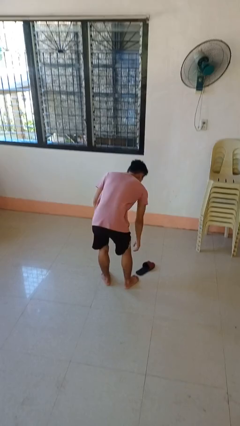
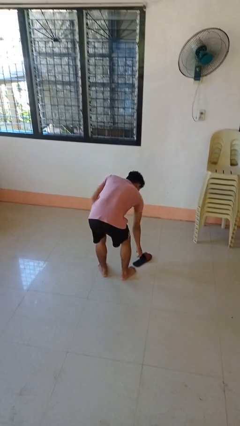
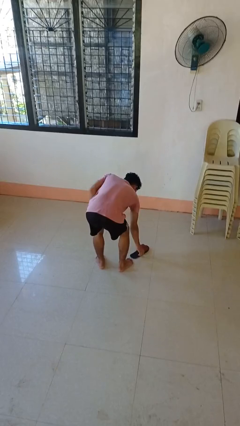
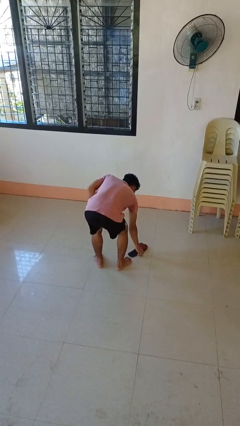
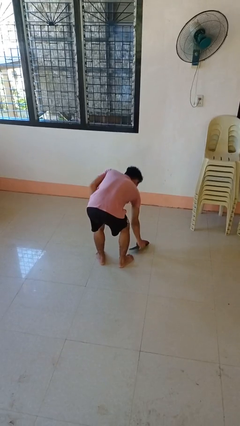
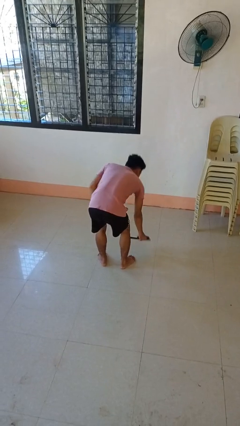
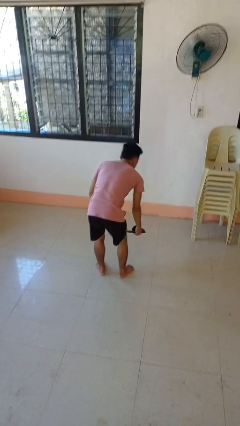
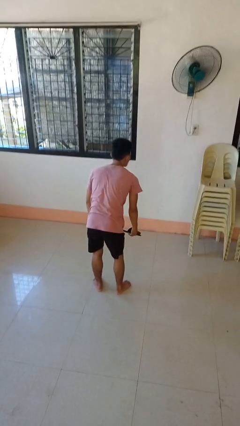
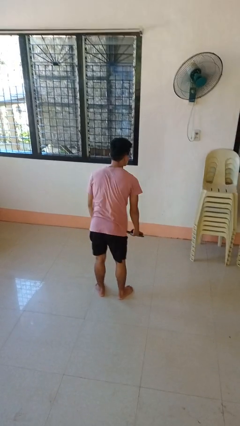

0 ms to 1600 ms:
person picks up object from floor

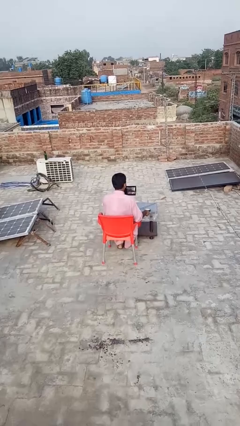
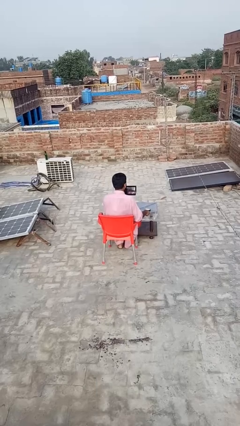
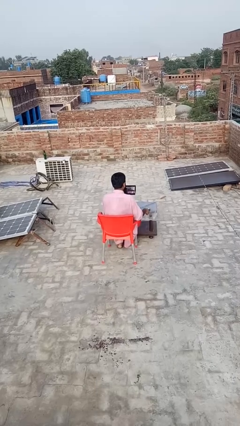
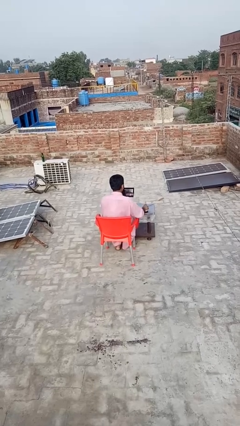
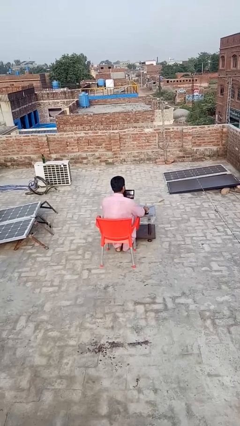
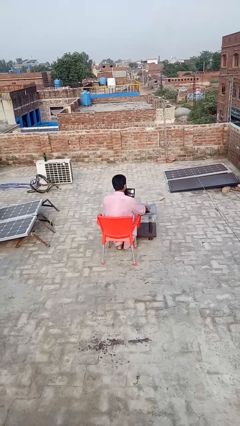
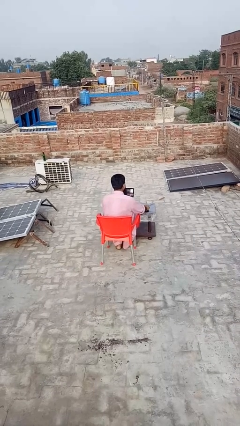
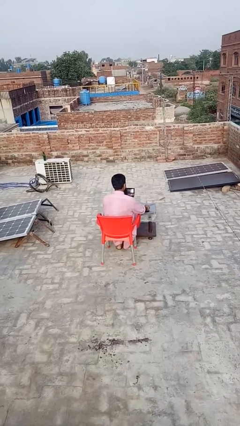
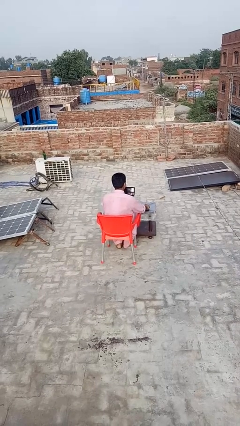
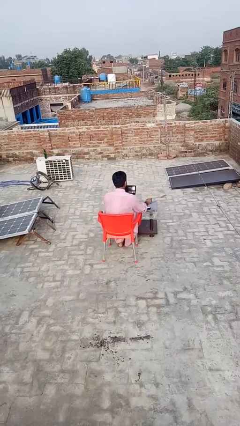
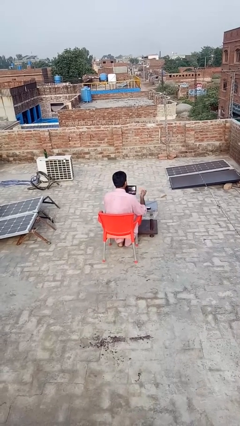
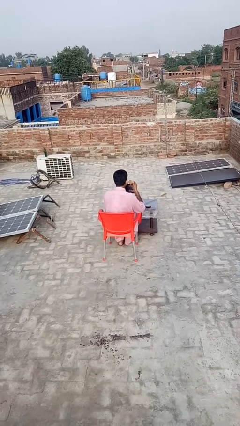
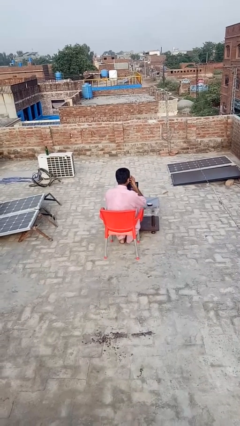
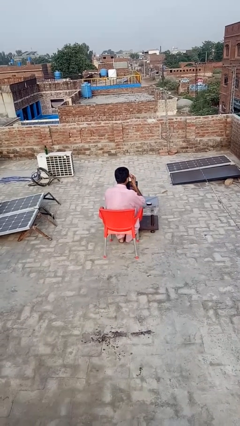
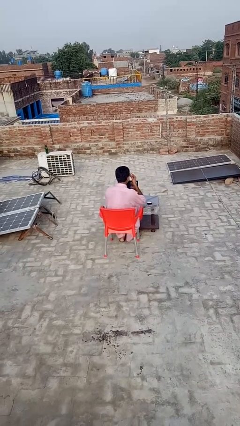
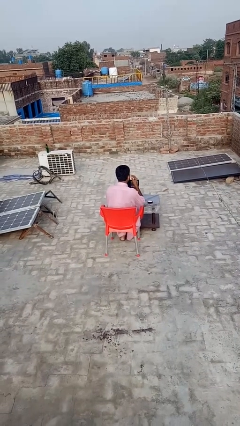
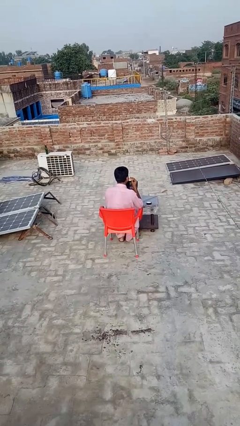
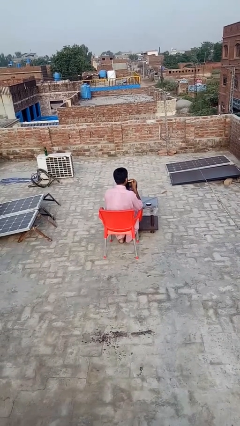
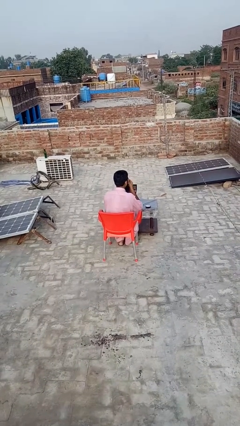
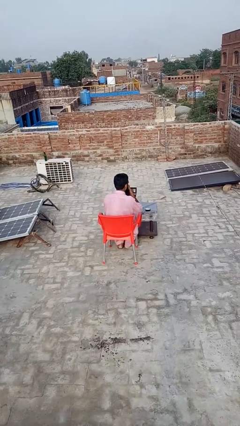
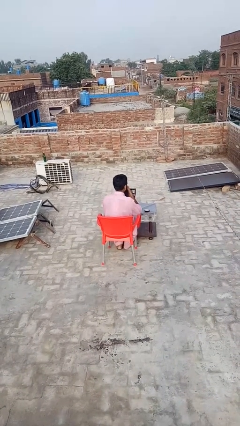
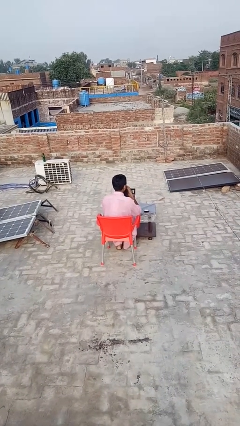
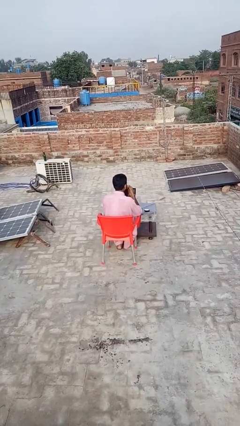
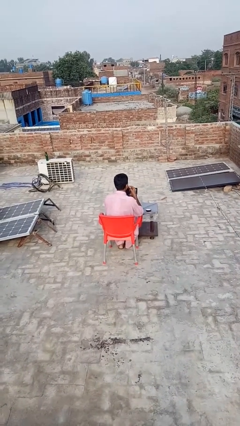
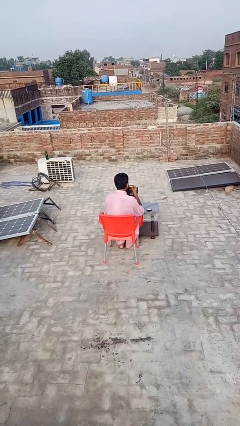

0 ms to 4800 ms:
person applies foundation makeup

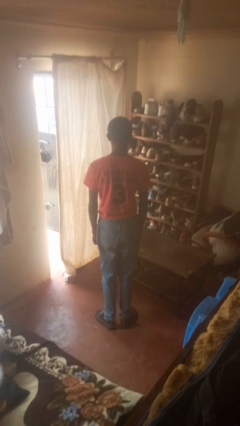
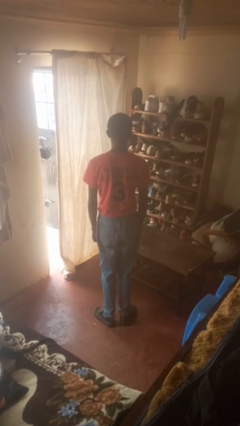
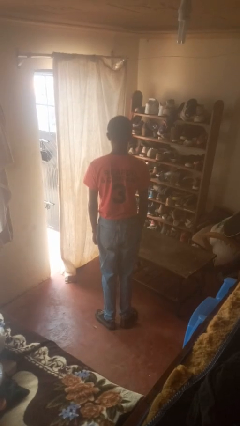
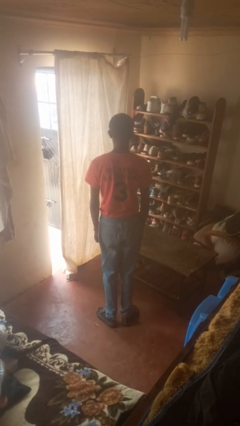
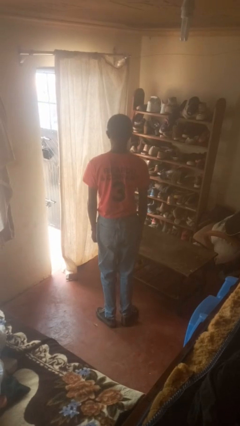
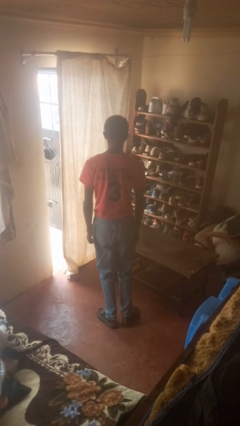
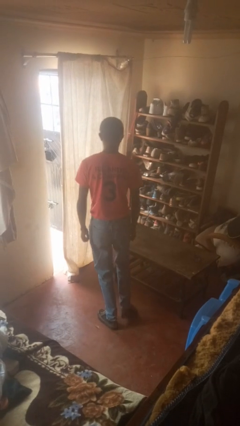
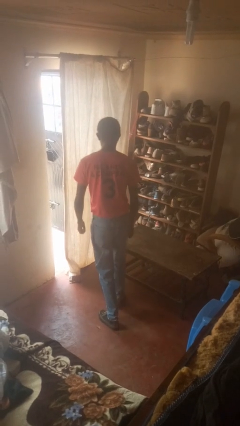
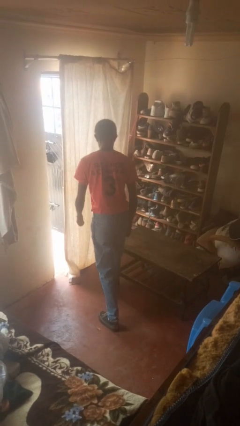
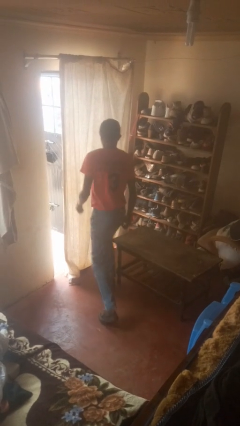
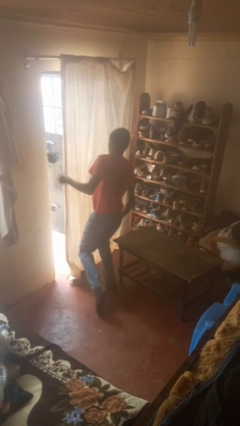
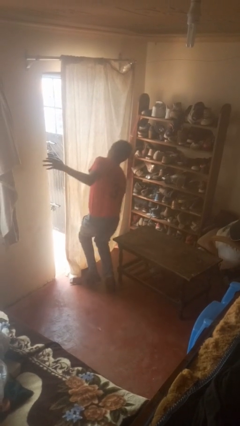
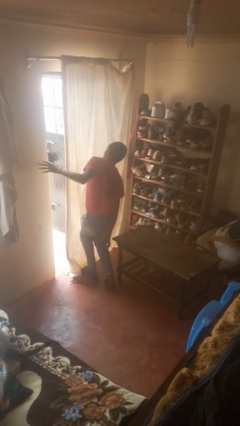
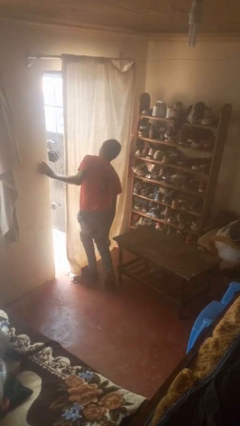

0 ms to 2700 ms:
person bumps into table

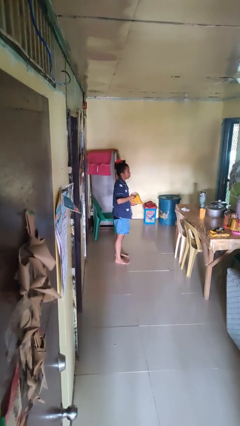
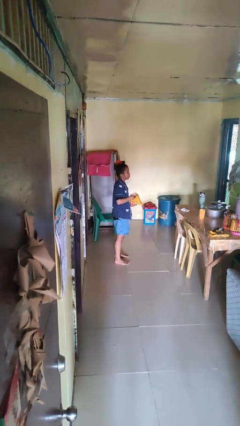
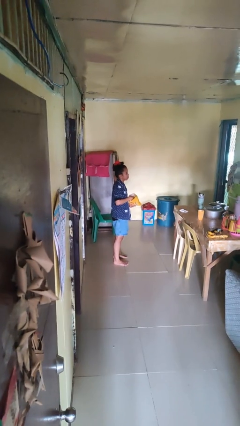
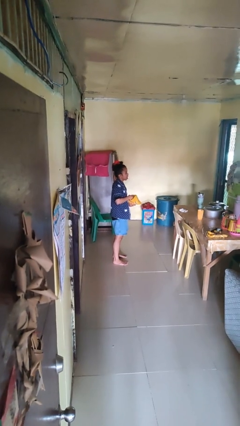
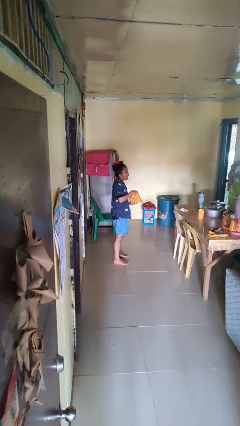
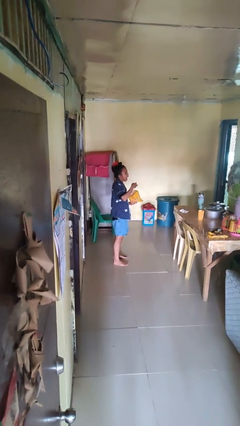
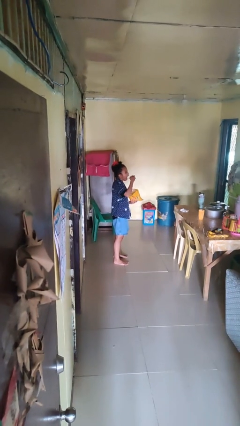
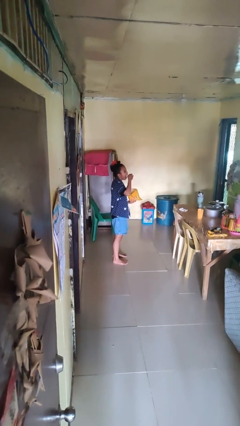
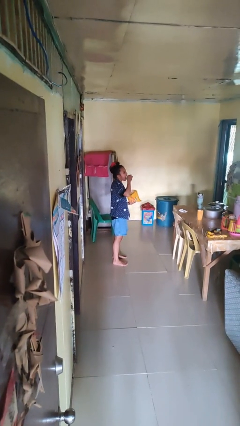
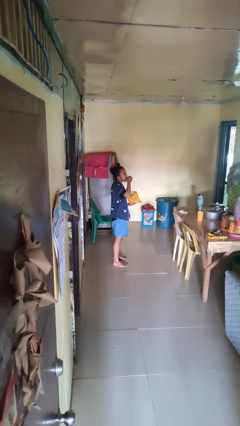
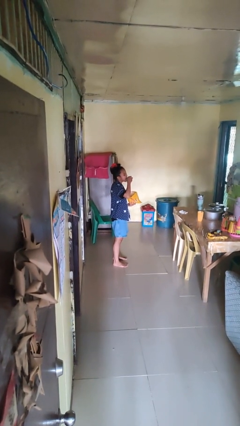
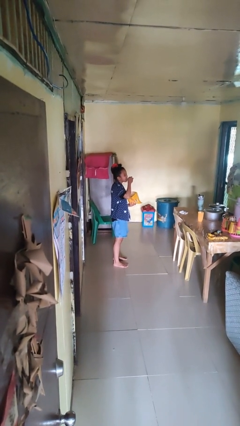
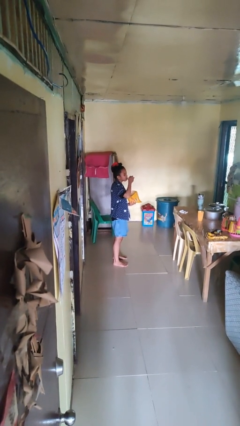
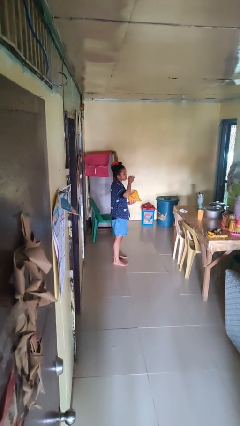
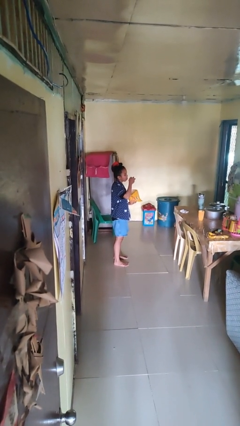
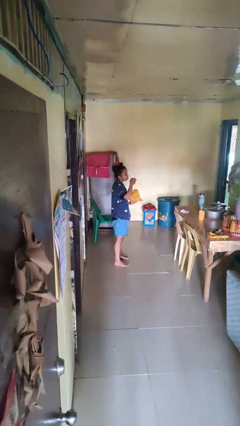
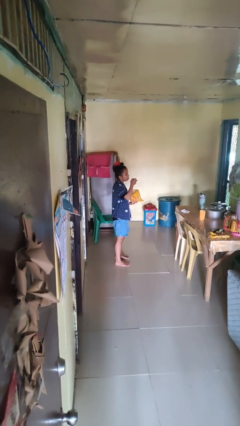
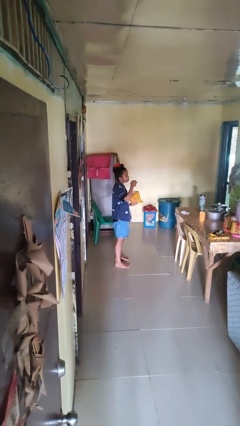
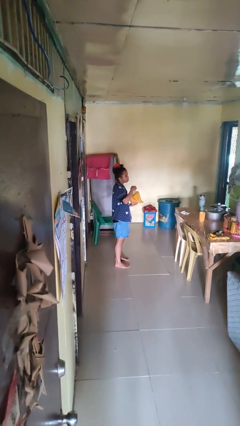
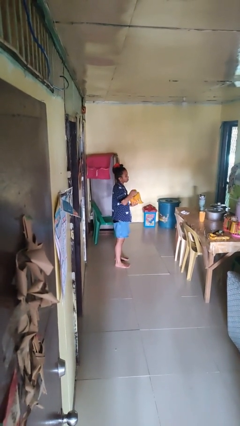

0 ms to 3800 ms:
person eats snack from bag

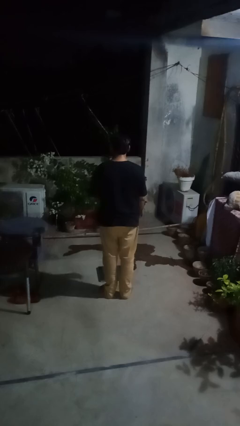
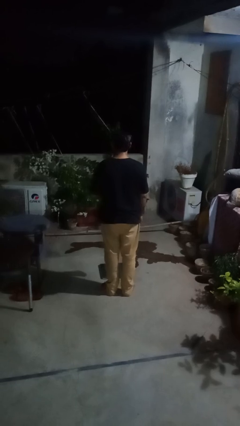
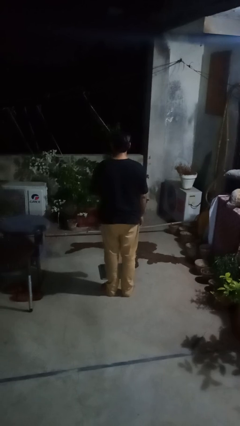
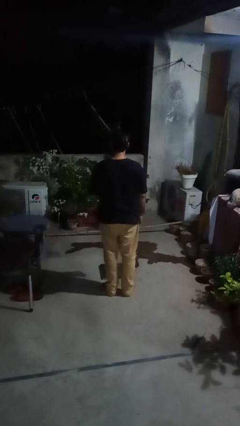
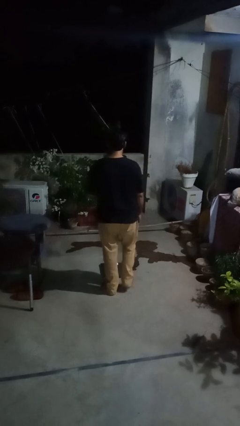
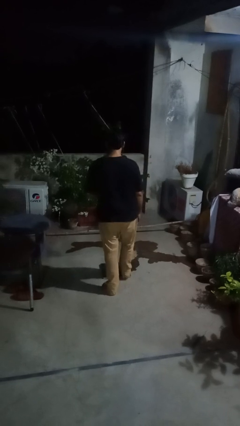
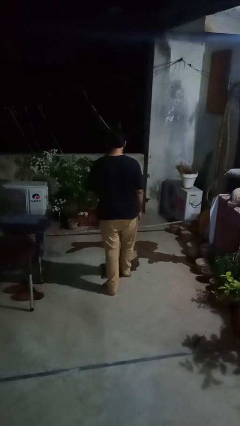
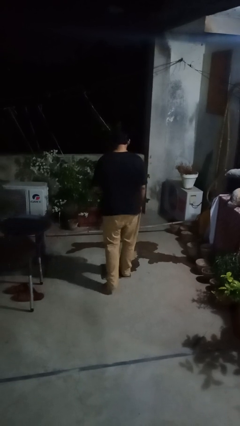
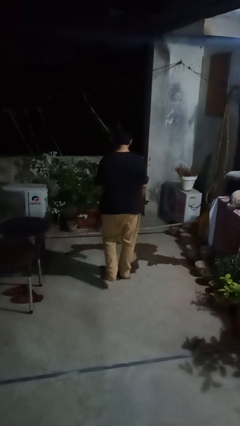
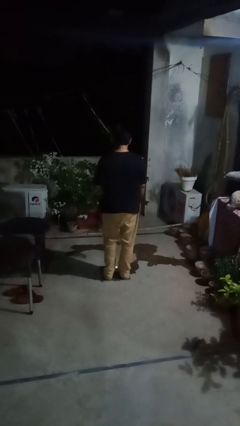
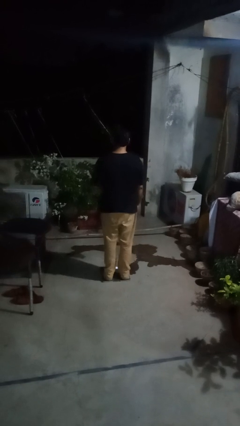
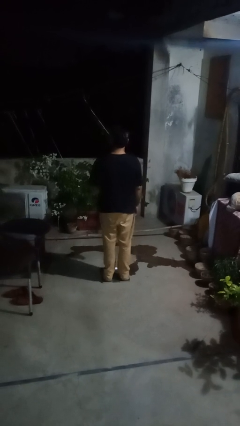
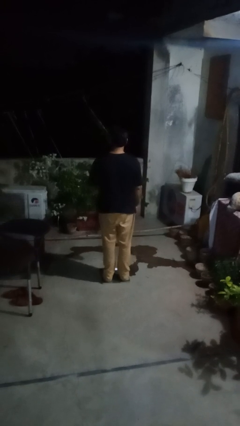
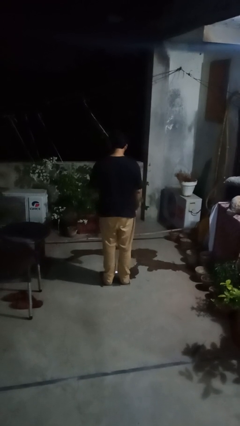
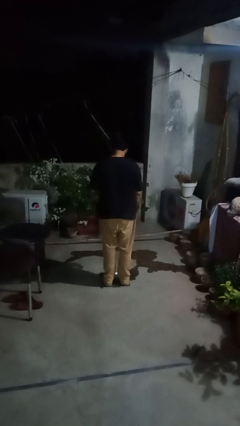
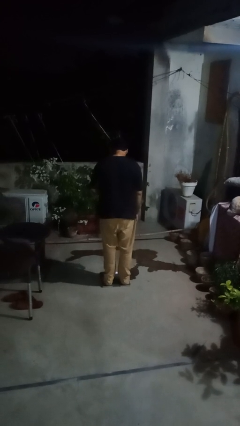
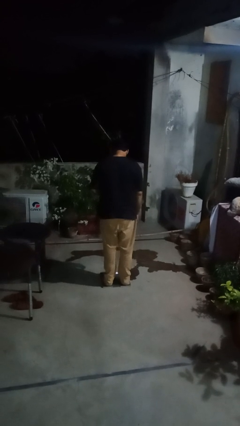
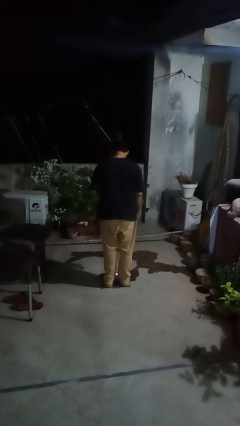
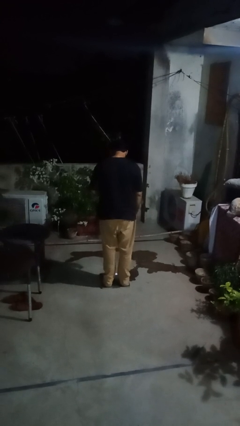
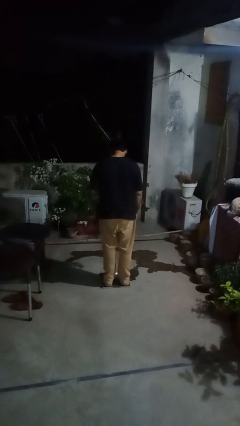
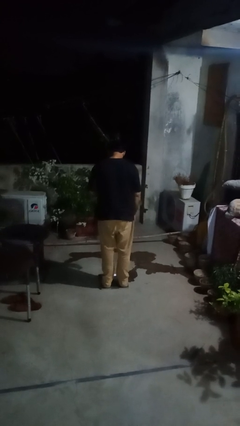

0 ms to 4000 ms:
person uses bodyweight scale

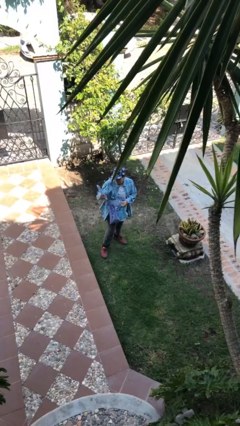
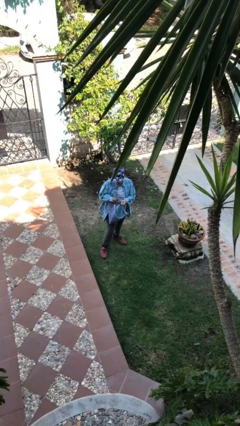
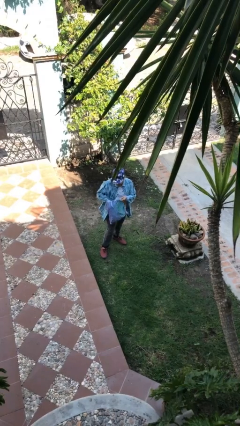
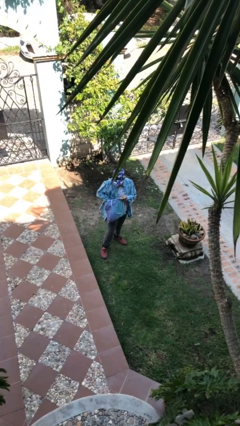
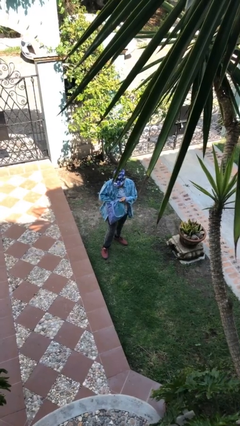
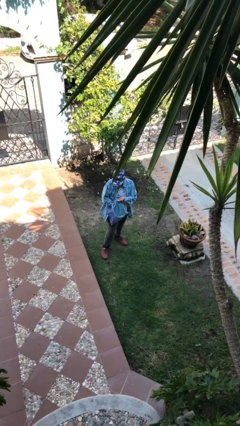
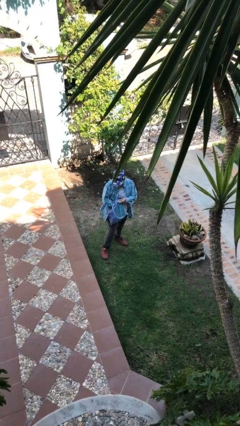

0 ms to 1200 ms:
person puts object into purse
